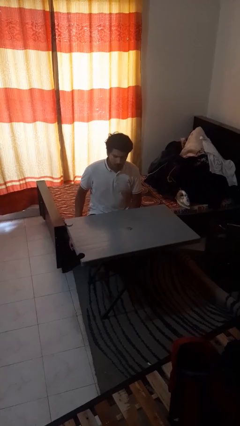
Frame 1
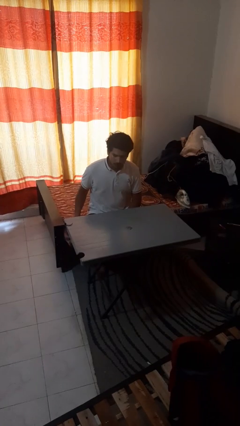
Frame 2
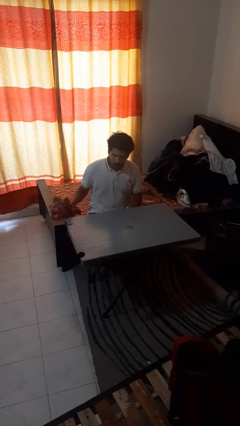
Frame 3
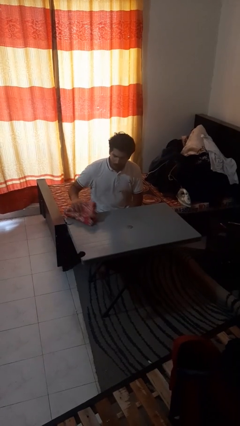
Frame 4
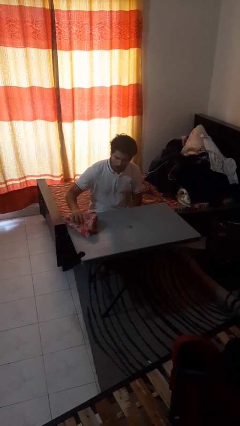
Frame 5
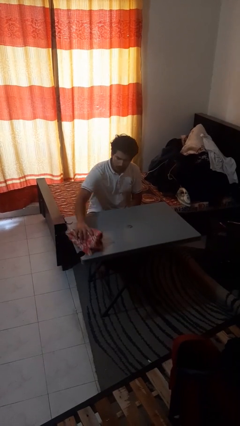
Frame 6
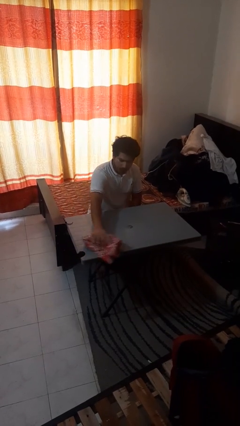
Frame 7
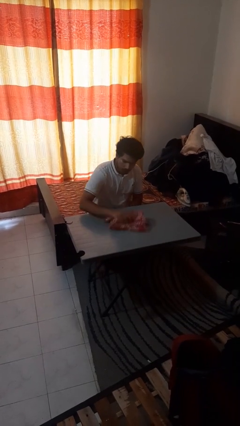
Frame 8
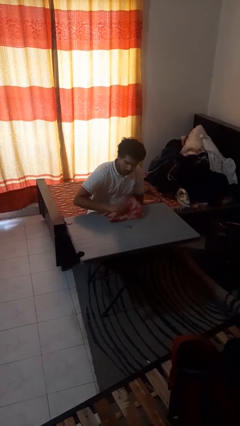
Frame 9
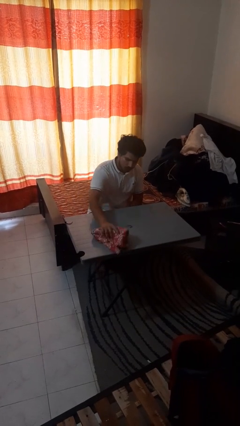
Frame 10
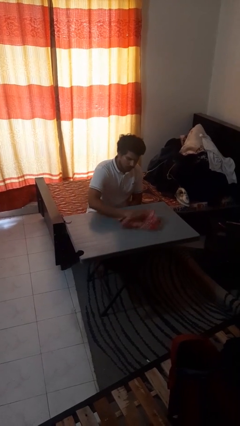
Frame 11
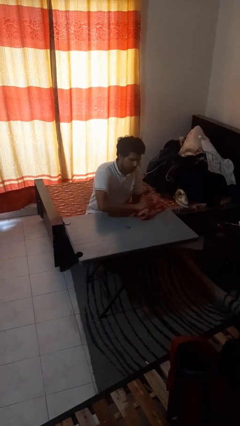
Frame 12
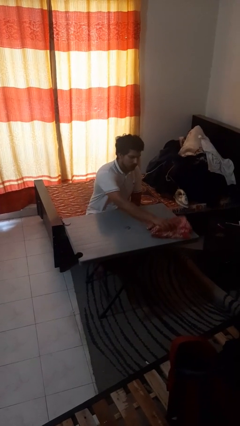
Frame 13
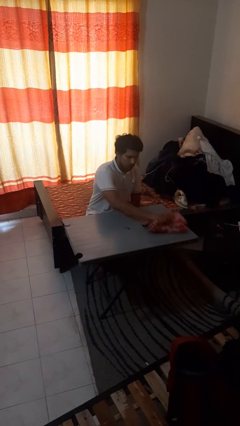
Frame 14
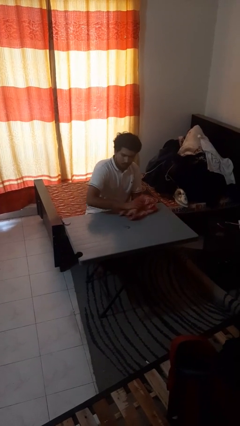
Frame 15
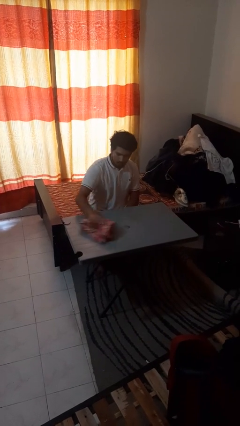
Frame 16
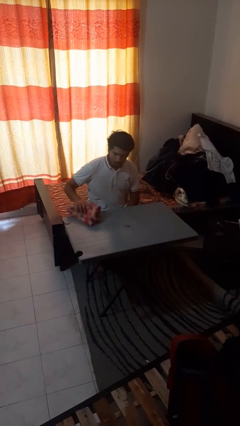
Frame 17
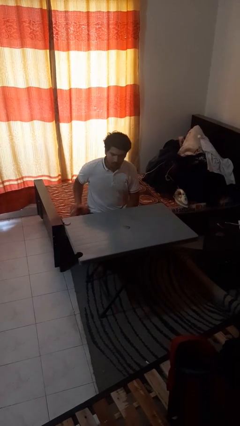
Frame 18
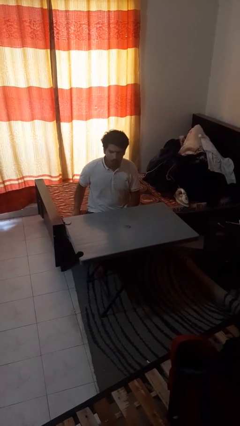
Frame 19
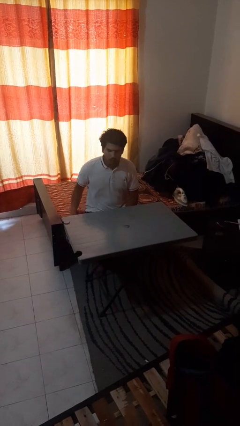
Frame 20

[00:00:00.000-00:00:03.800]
person cleans table with rag

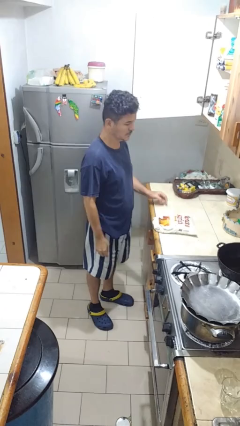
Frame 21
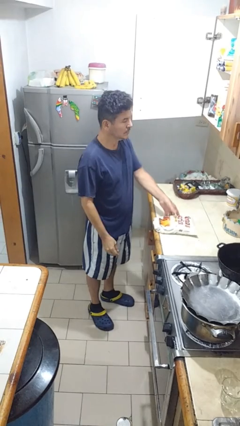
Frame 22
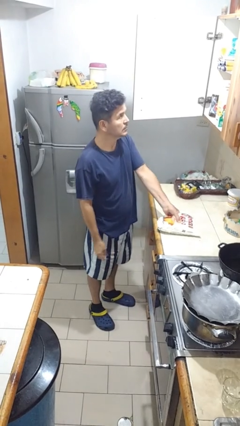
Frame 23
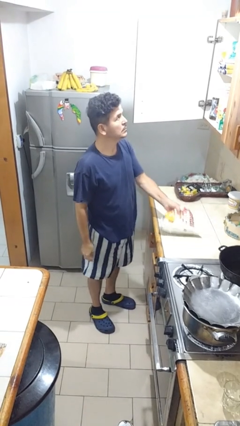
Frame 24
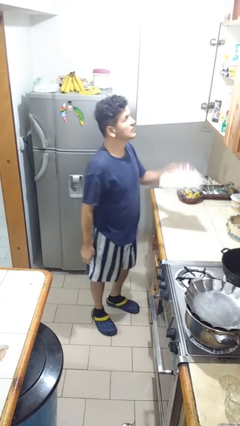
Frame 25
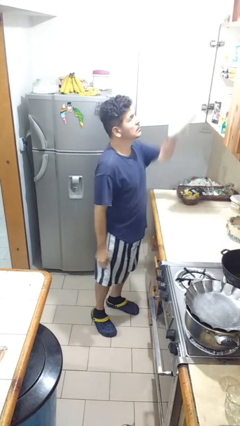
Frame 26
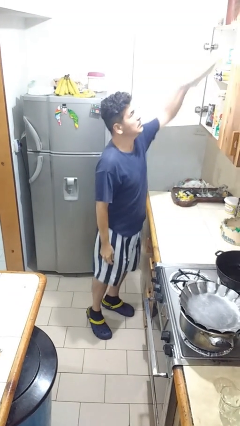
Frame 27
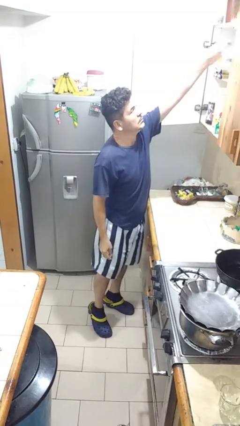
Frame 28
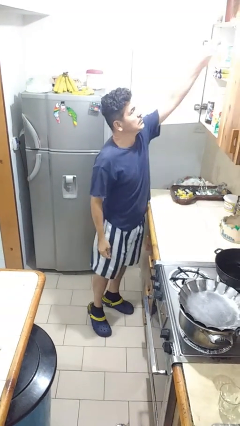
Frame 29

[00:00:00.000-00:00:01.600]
person puts object in cabinet

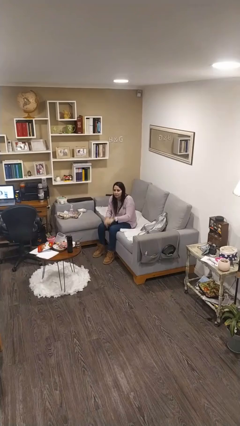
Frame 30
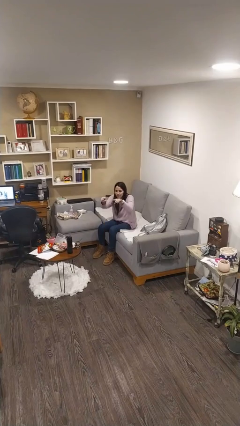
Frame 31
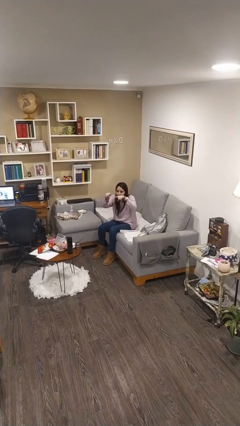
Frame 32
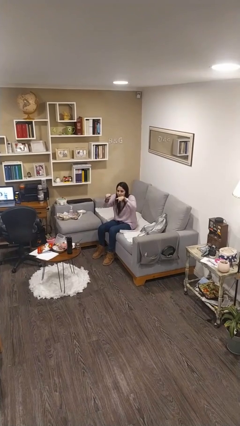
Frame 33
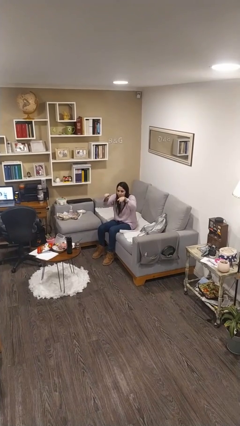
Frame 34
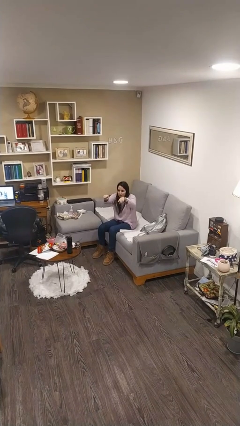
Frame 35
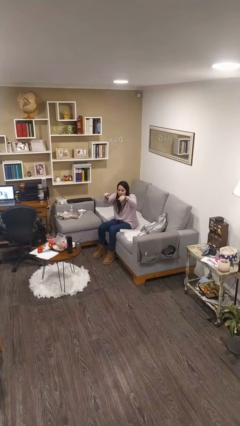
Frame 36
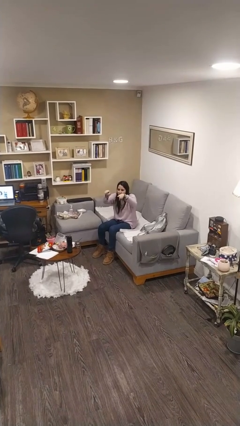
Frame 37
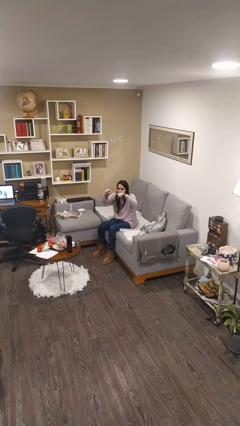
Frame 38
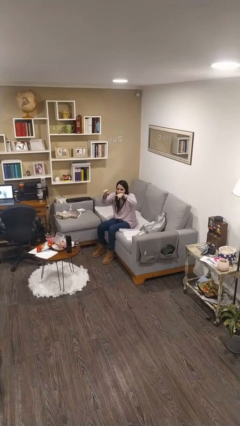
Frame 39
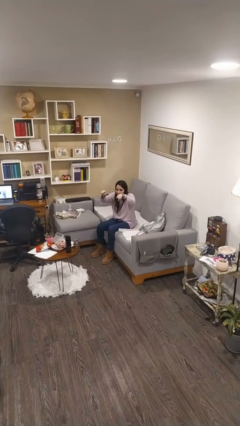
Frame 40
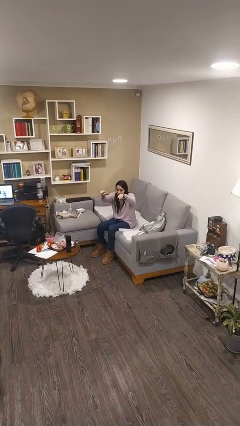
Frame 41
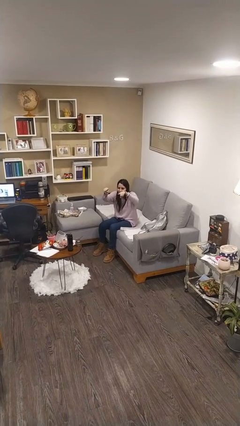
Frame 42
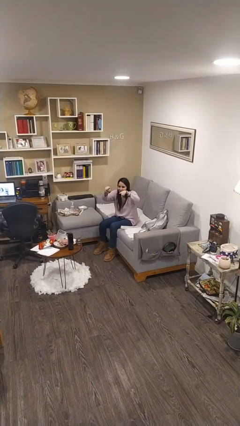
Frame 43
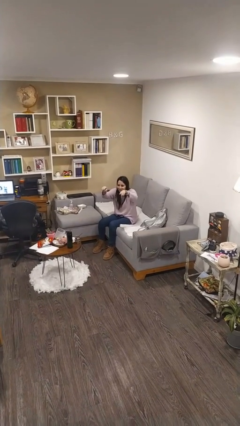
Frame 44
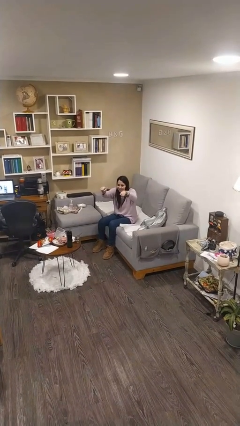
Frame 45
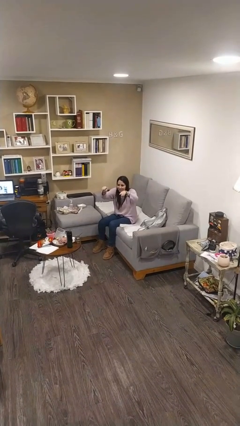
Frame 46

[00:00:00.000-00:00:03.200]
person points at person

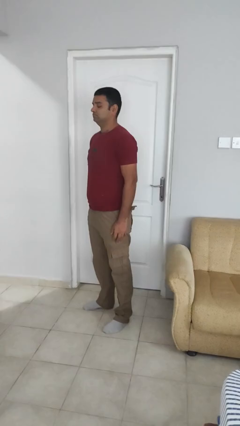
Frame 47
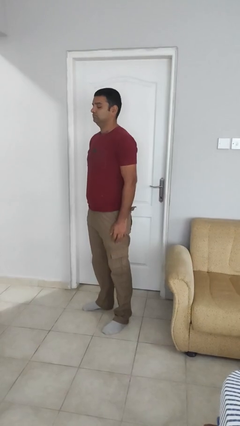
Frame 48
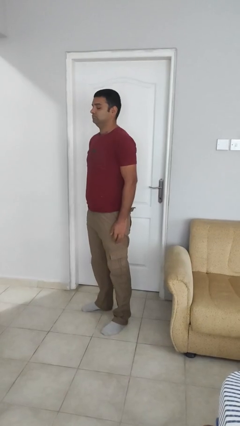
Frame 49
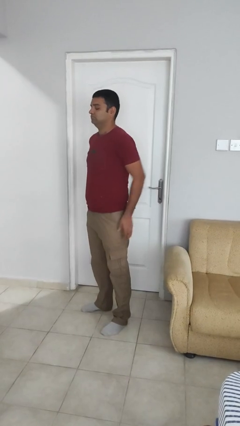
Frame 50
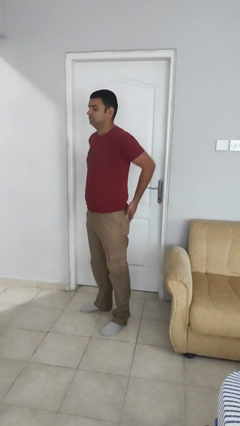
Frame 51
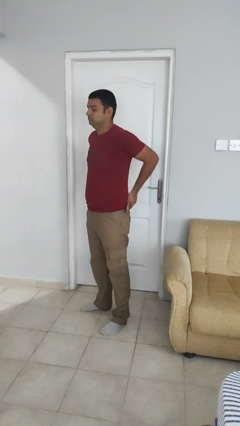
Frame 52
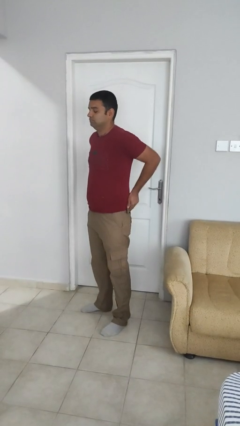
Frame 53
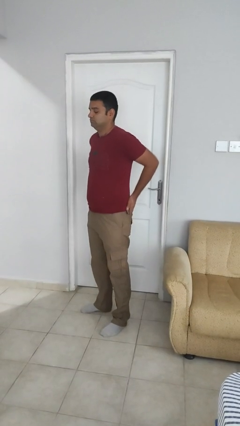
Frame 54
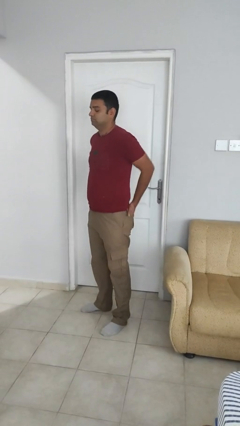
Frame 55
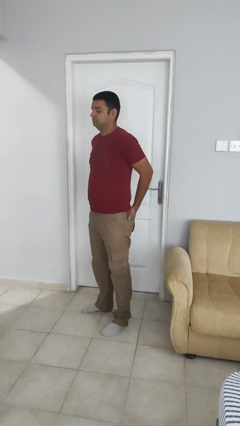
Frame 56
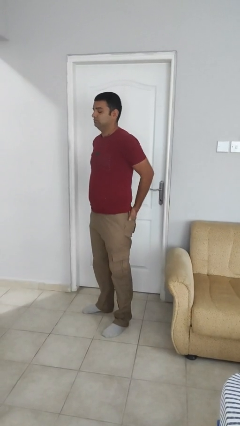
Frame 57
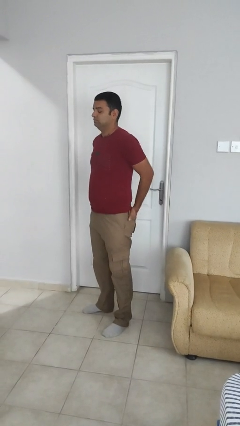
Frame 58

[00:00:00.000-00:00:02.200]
person puts hands in back pockets

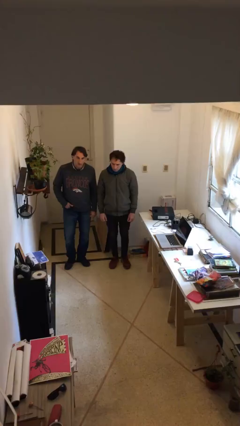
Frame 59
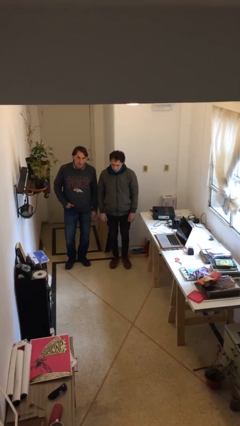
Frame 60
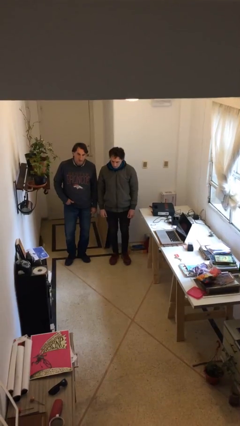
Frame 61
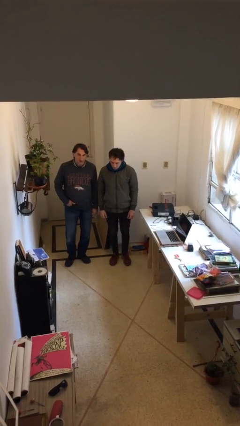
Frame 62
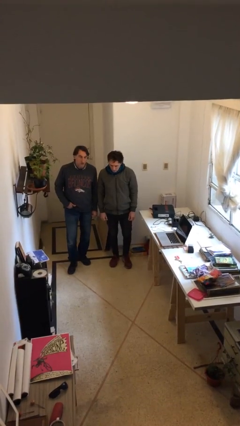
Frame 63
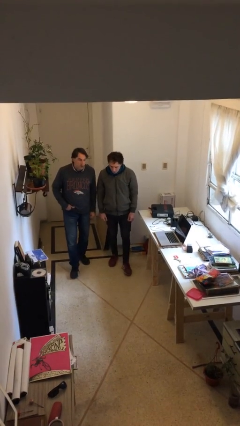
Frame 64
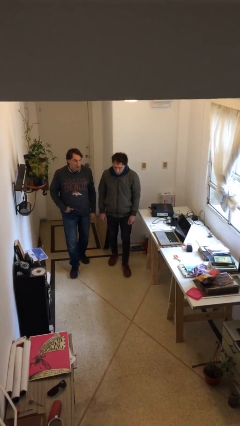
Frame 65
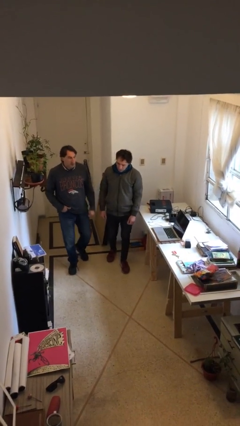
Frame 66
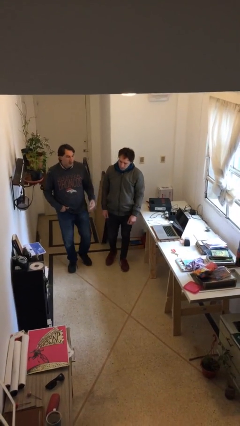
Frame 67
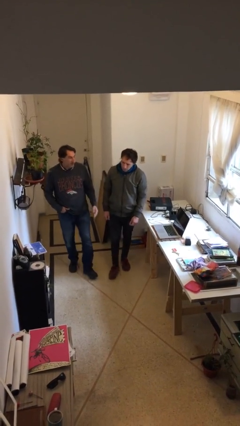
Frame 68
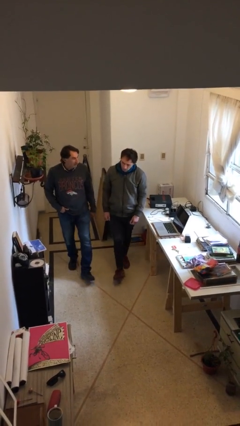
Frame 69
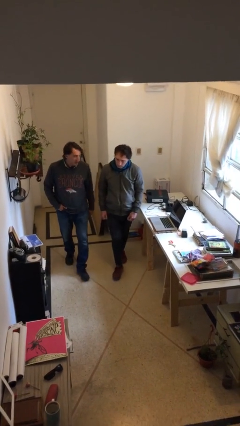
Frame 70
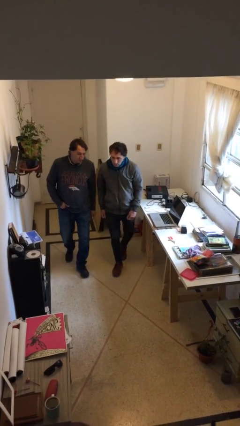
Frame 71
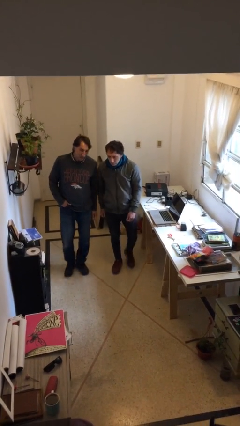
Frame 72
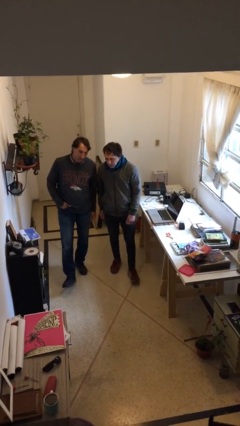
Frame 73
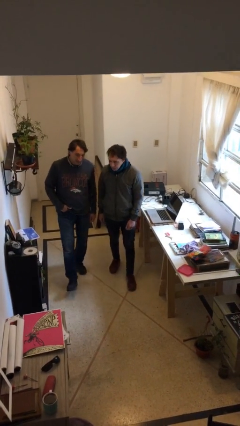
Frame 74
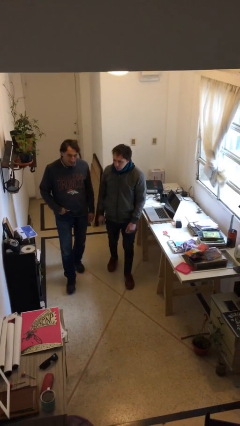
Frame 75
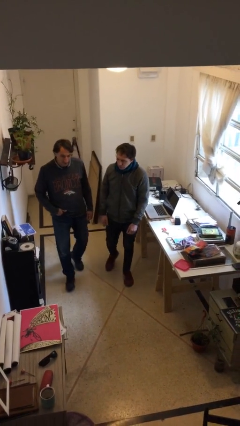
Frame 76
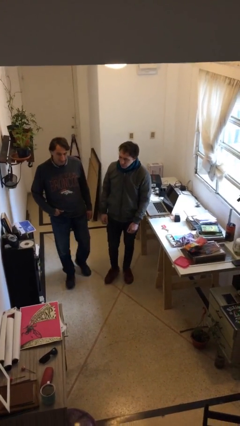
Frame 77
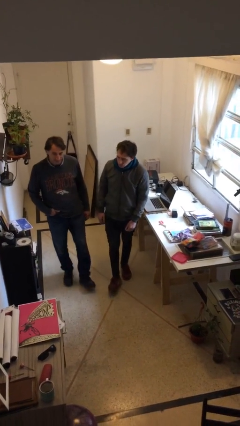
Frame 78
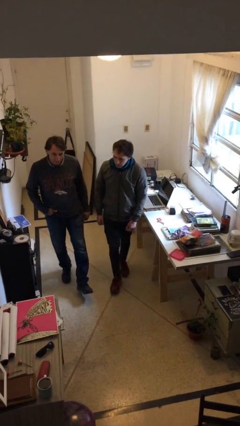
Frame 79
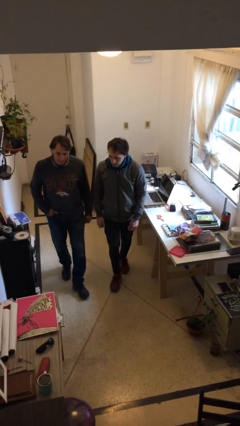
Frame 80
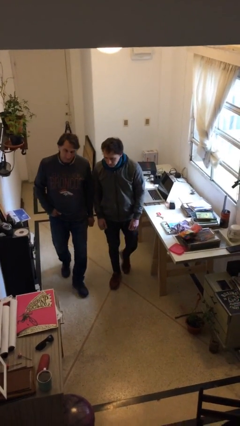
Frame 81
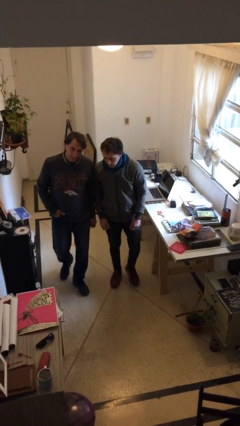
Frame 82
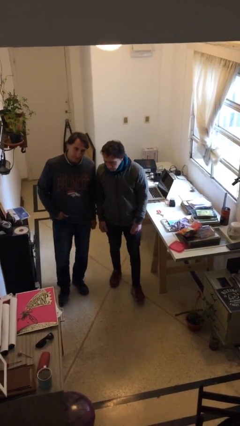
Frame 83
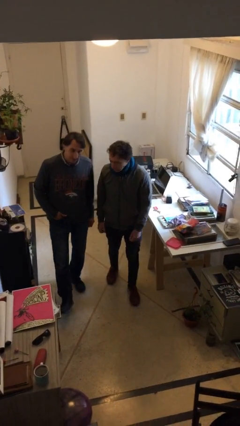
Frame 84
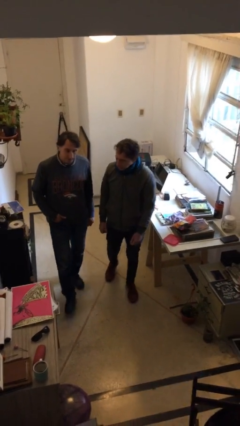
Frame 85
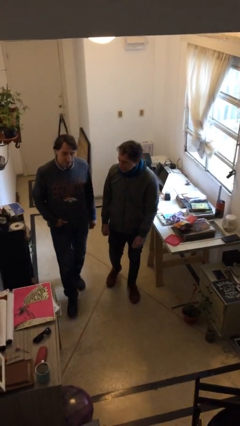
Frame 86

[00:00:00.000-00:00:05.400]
person talks to person

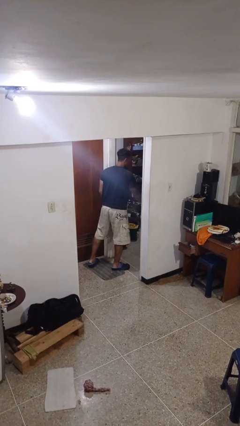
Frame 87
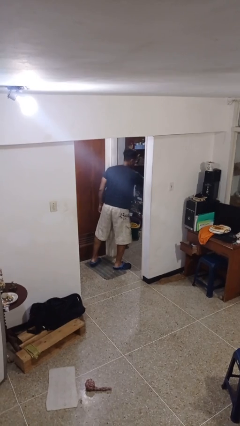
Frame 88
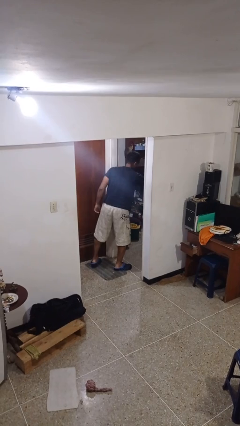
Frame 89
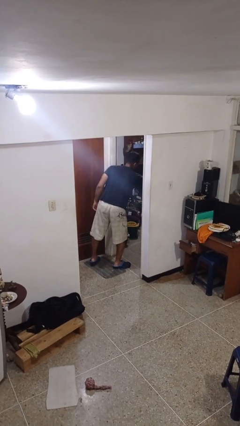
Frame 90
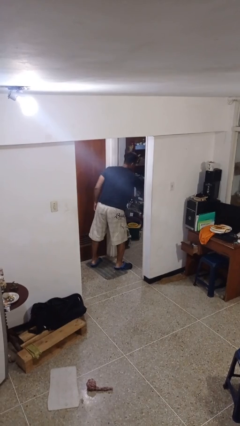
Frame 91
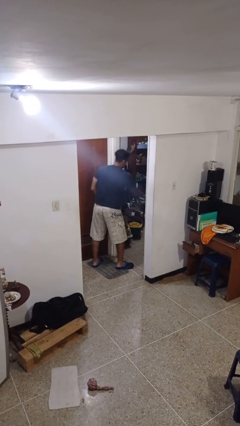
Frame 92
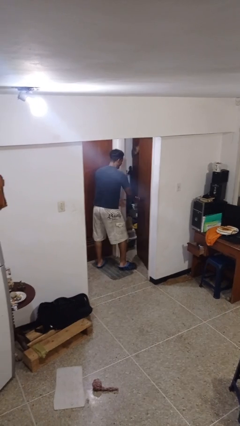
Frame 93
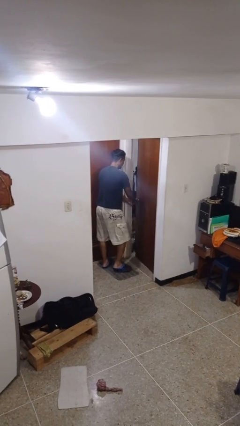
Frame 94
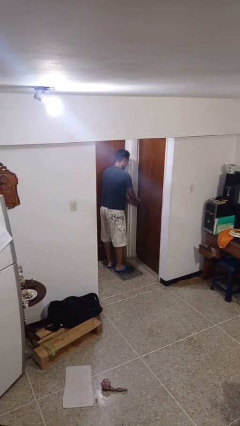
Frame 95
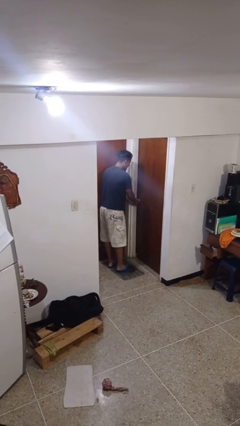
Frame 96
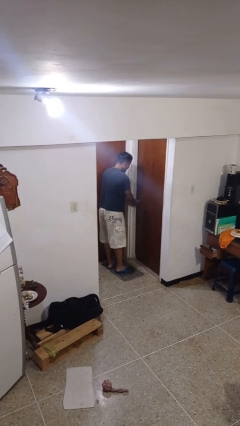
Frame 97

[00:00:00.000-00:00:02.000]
person closes facility door
